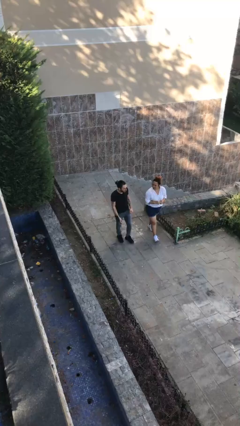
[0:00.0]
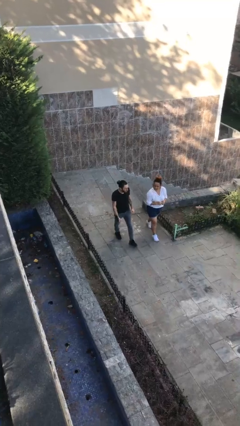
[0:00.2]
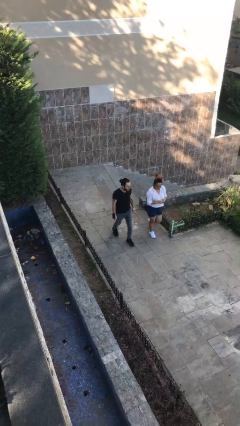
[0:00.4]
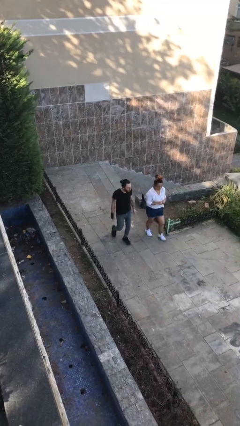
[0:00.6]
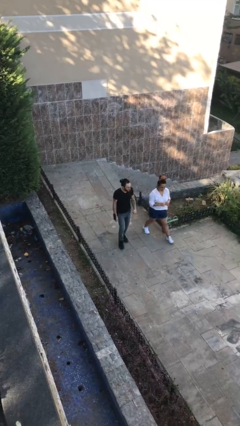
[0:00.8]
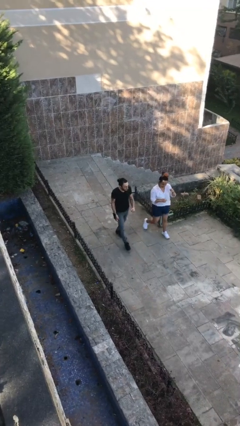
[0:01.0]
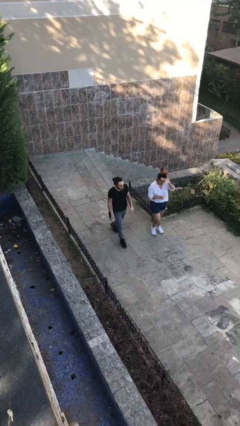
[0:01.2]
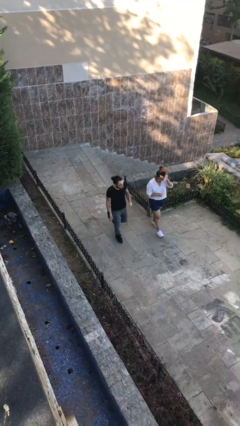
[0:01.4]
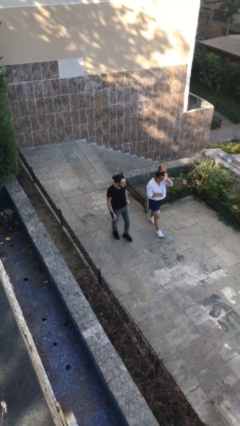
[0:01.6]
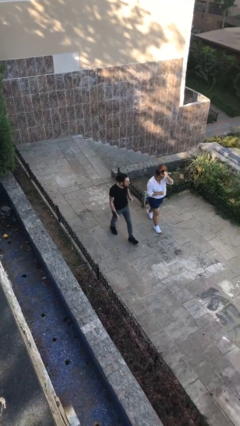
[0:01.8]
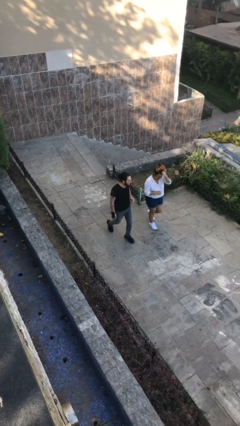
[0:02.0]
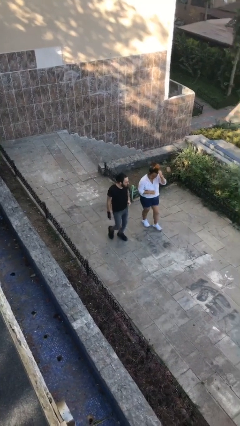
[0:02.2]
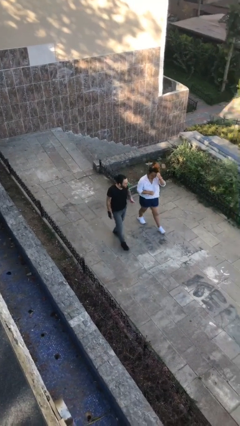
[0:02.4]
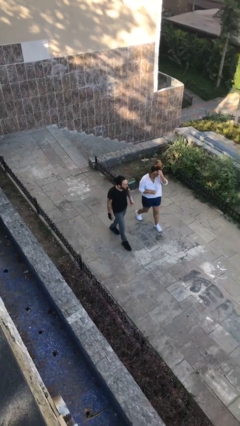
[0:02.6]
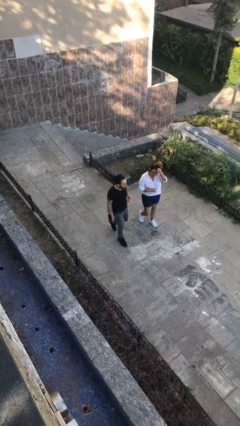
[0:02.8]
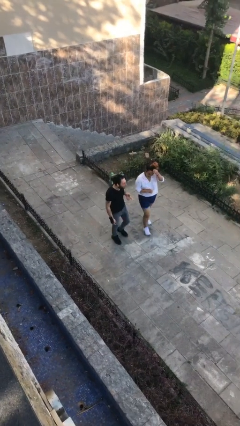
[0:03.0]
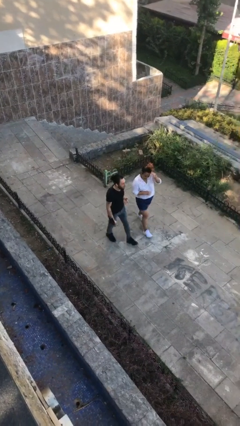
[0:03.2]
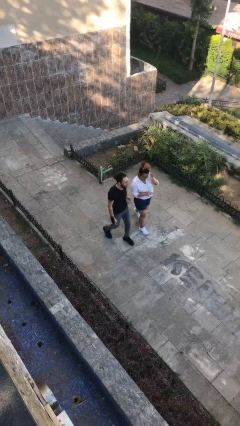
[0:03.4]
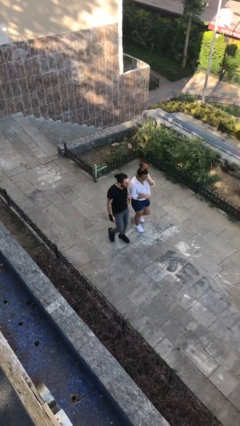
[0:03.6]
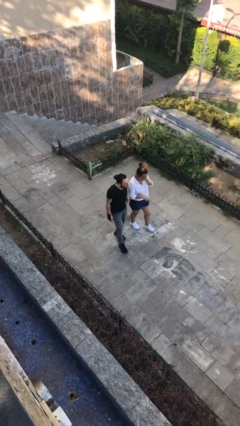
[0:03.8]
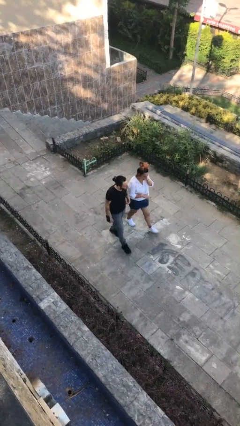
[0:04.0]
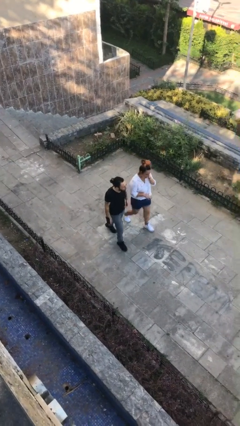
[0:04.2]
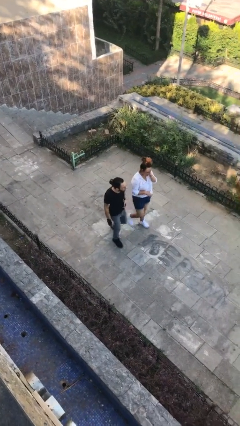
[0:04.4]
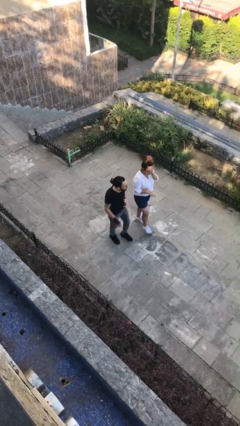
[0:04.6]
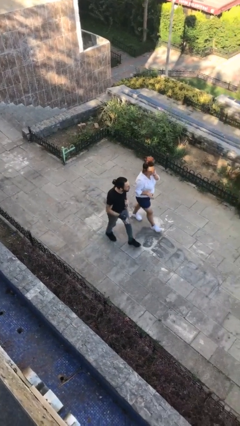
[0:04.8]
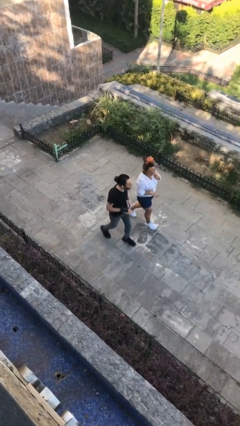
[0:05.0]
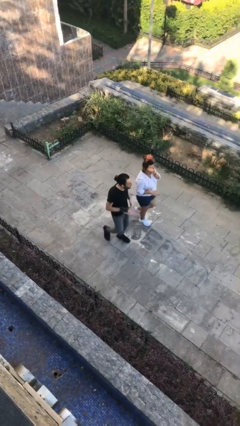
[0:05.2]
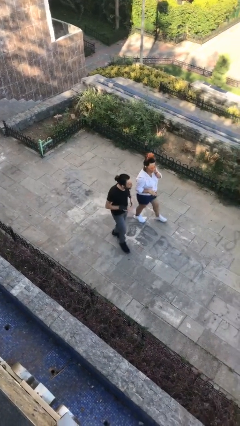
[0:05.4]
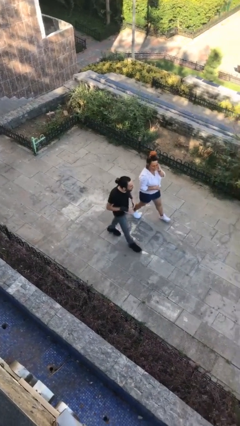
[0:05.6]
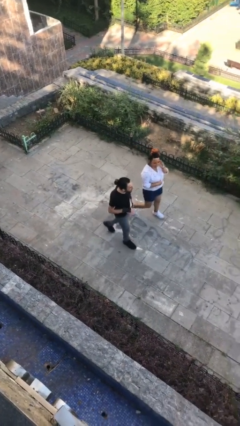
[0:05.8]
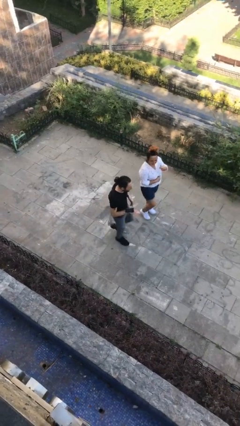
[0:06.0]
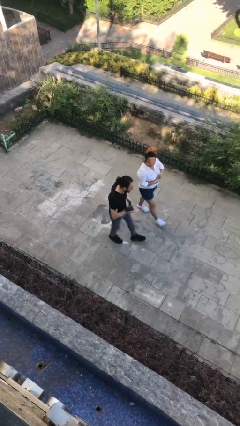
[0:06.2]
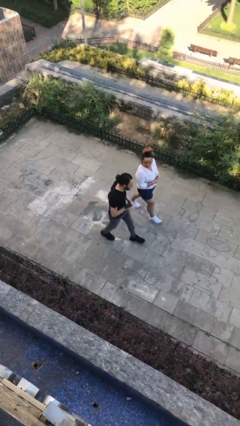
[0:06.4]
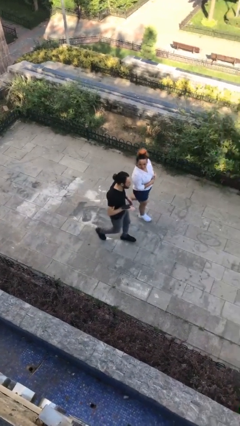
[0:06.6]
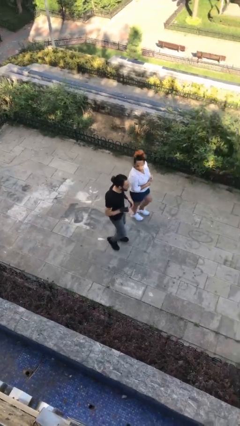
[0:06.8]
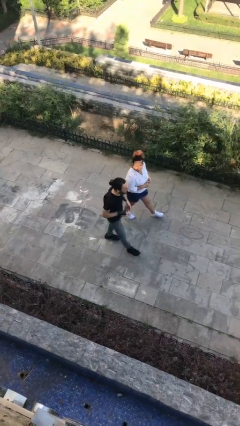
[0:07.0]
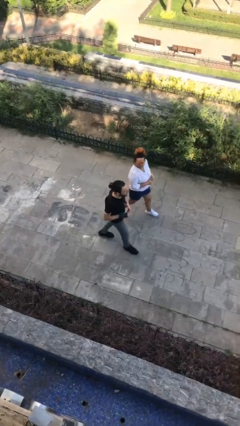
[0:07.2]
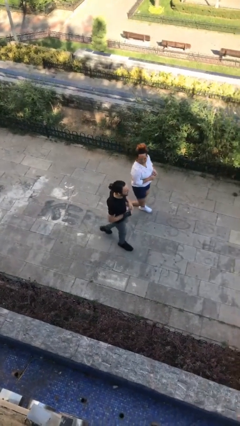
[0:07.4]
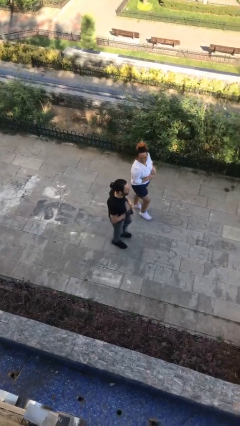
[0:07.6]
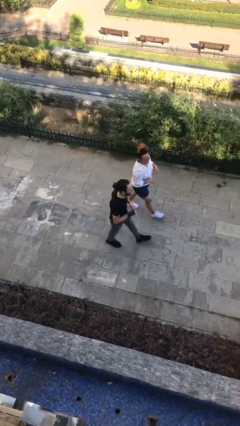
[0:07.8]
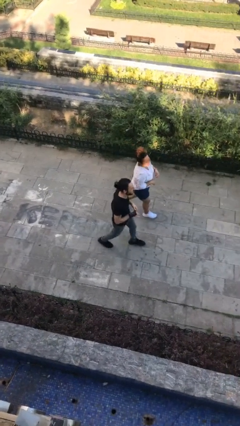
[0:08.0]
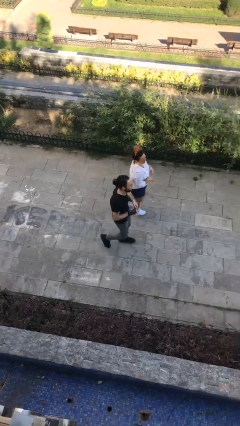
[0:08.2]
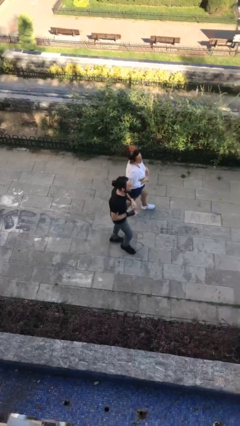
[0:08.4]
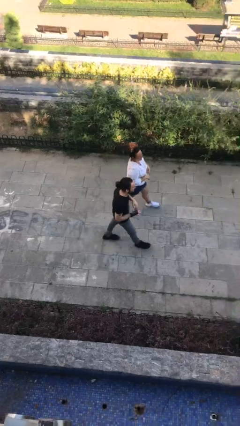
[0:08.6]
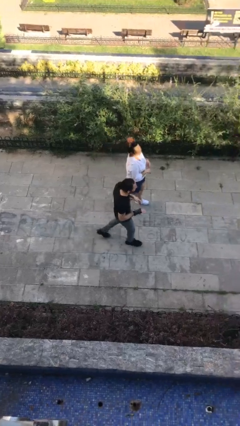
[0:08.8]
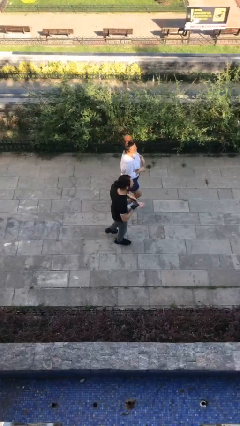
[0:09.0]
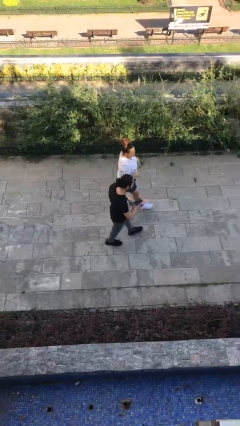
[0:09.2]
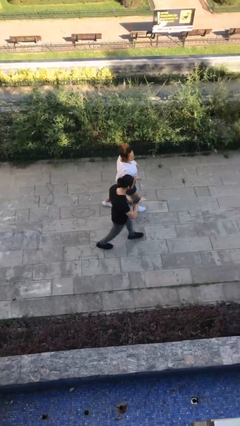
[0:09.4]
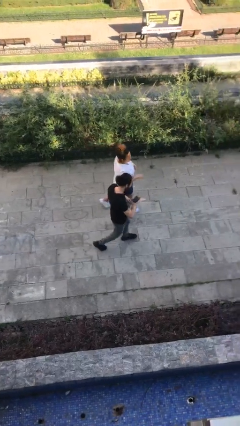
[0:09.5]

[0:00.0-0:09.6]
person talks to person

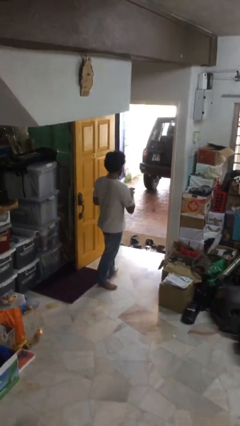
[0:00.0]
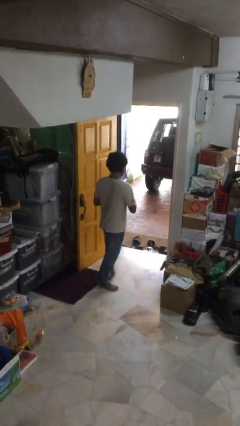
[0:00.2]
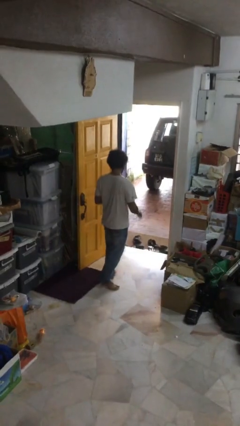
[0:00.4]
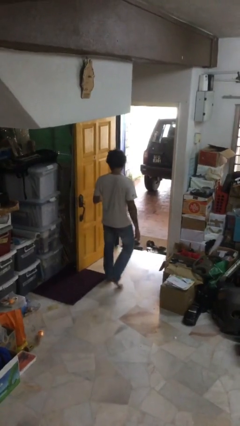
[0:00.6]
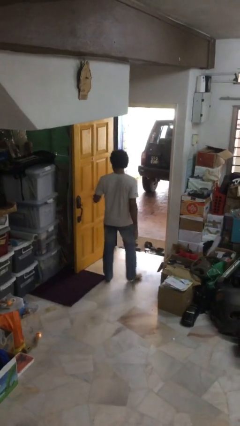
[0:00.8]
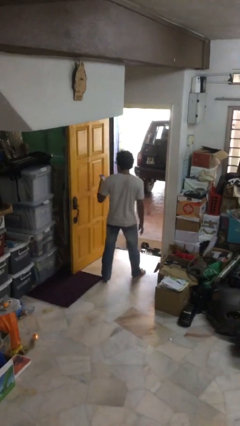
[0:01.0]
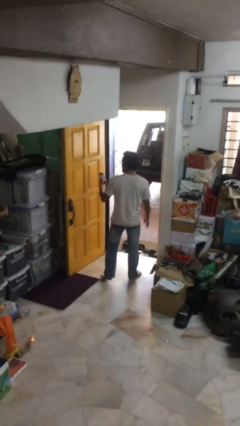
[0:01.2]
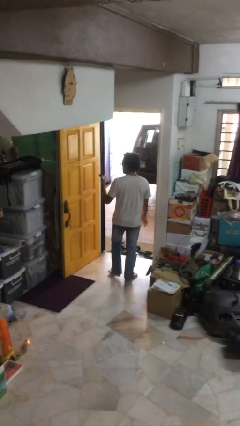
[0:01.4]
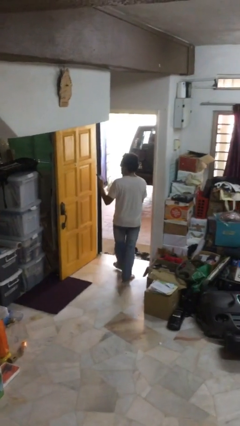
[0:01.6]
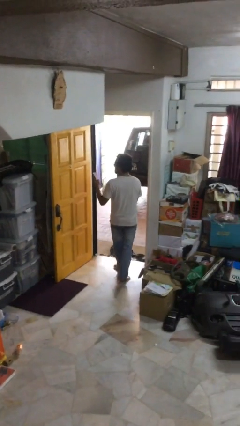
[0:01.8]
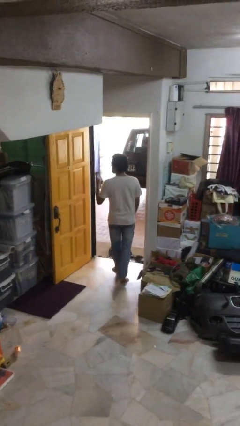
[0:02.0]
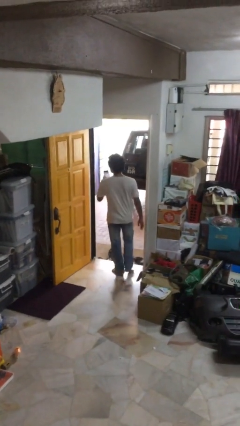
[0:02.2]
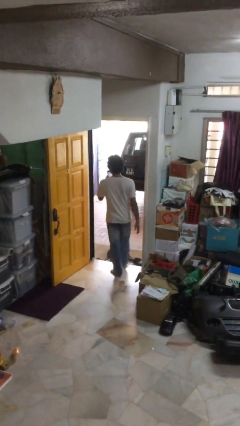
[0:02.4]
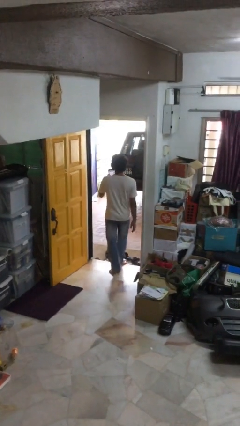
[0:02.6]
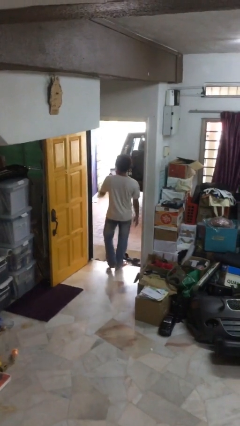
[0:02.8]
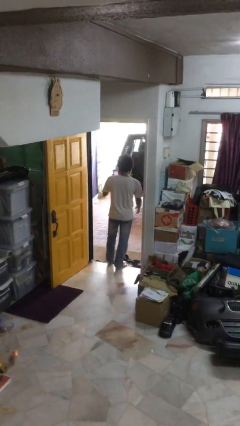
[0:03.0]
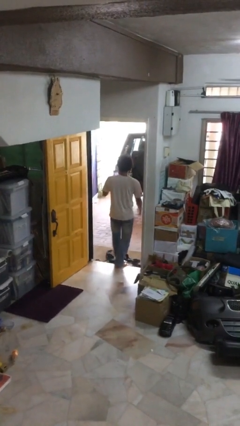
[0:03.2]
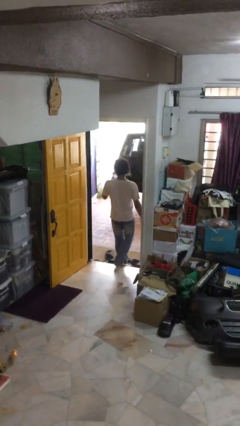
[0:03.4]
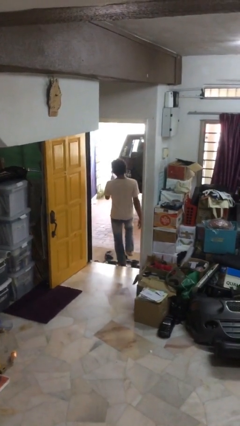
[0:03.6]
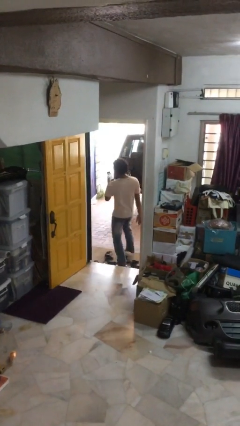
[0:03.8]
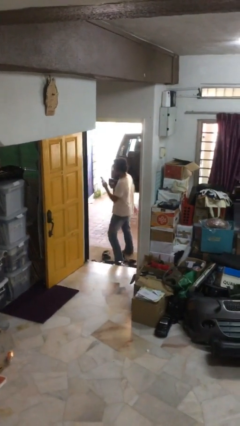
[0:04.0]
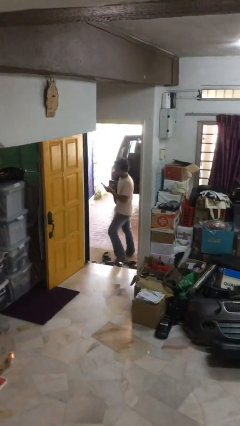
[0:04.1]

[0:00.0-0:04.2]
person exits scene through structure

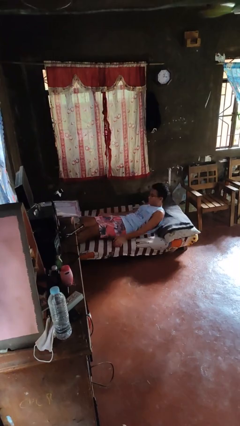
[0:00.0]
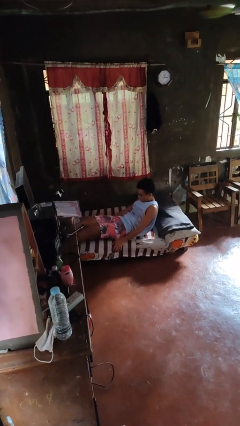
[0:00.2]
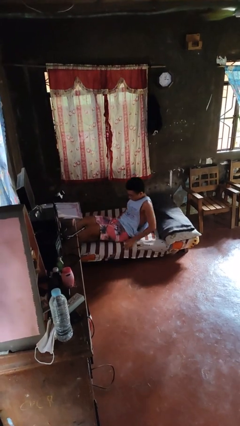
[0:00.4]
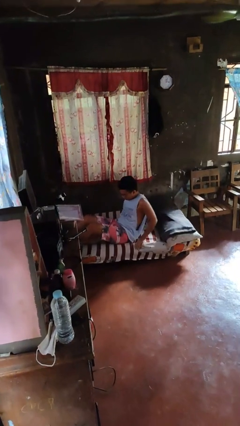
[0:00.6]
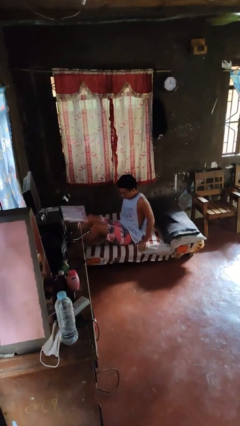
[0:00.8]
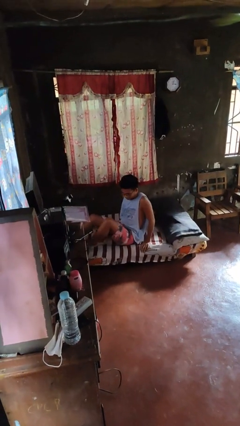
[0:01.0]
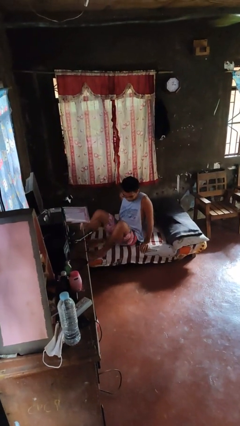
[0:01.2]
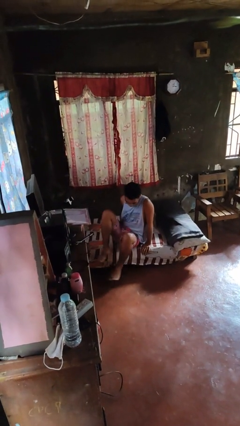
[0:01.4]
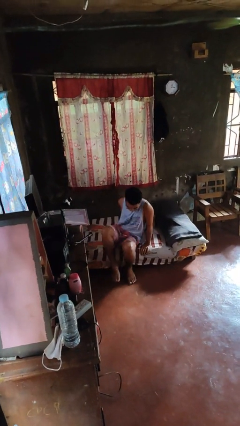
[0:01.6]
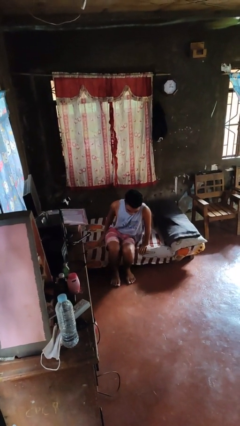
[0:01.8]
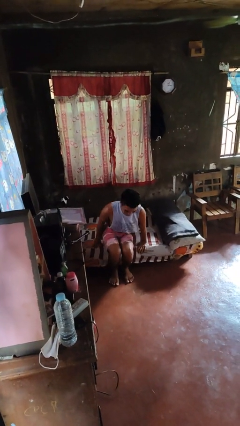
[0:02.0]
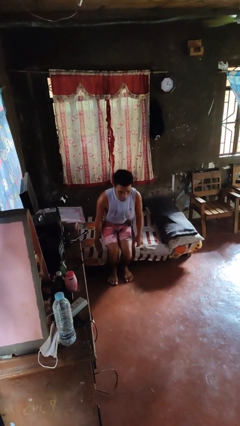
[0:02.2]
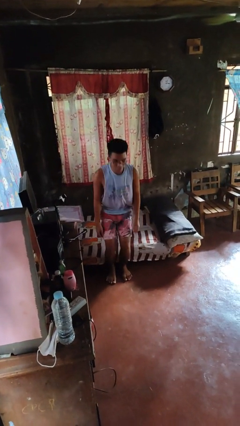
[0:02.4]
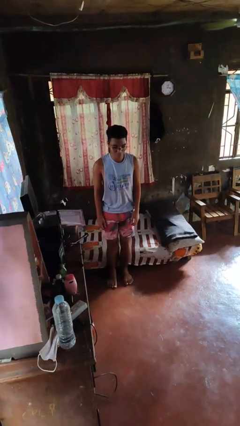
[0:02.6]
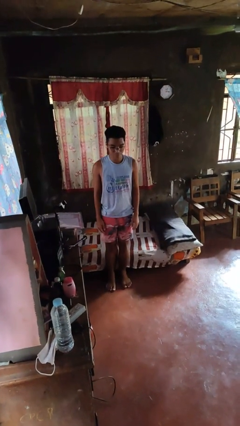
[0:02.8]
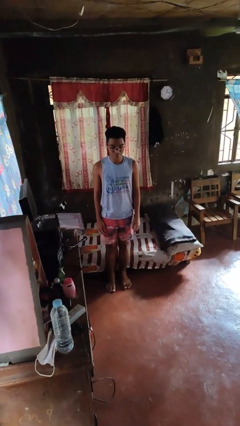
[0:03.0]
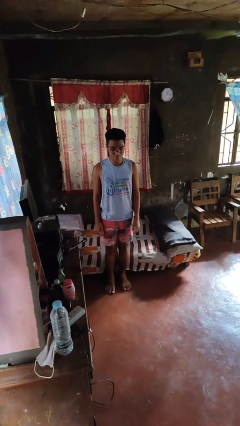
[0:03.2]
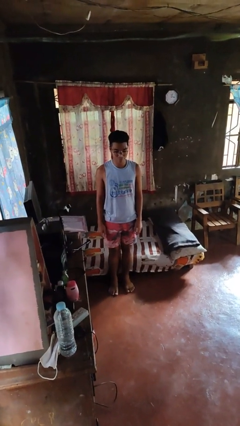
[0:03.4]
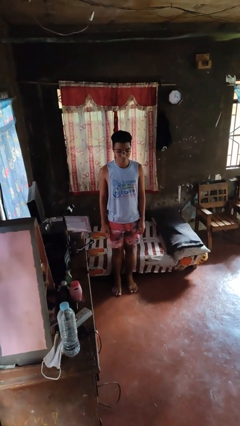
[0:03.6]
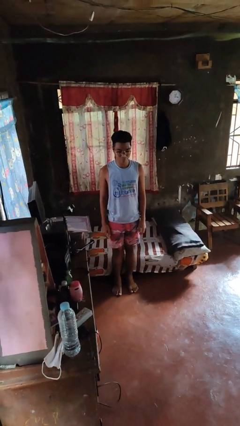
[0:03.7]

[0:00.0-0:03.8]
person stands up
